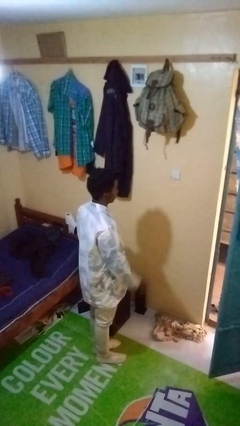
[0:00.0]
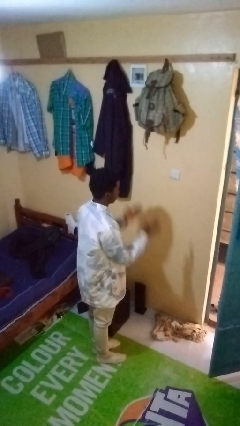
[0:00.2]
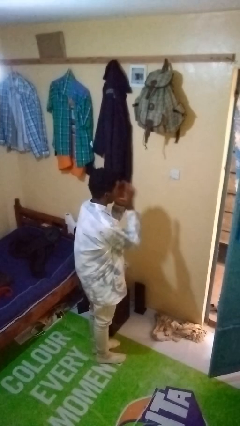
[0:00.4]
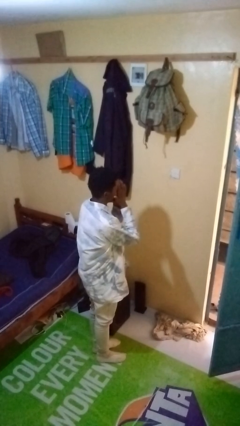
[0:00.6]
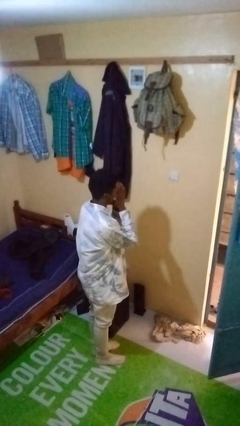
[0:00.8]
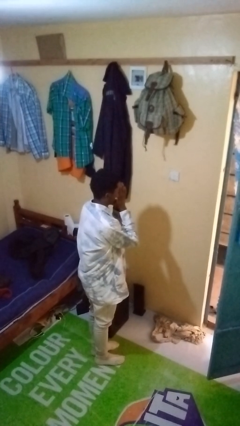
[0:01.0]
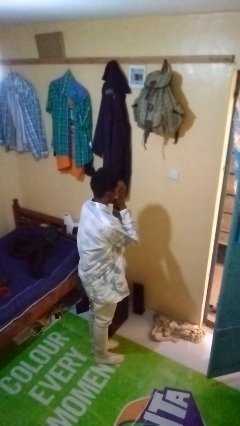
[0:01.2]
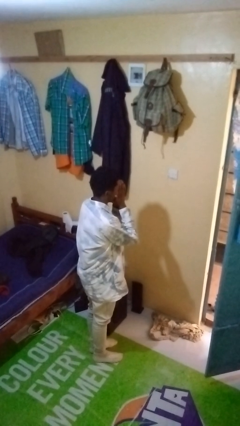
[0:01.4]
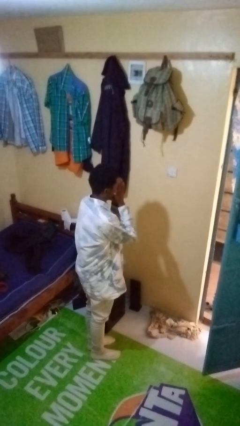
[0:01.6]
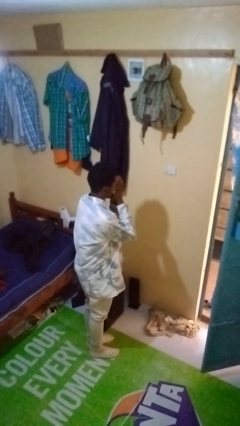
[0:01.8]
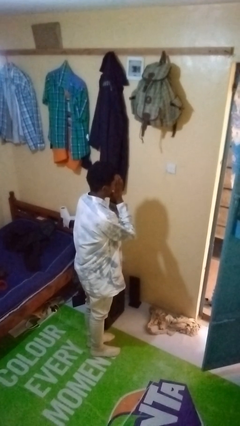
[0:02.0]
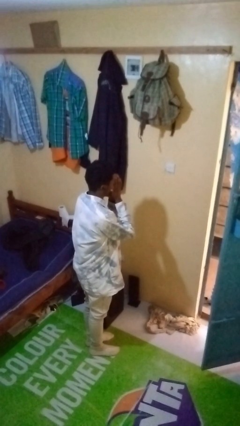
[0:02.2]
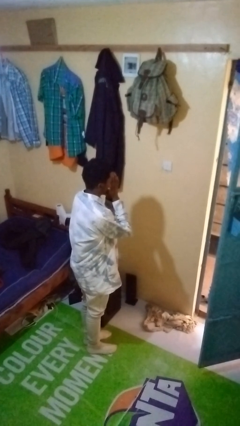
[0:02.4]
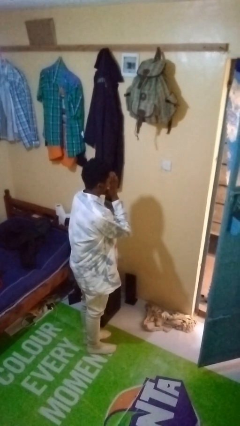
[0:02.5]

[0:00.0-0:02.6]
person covers face with hands

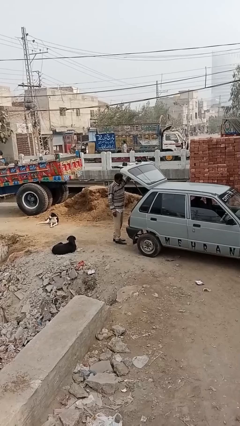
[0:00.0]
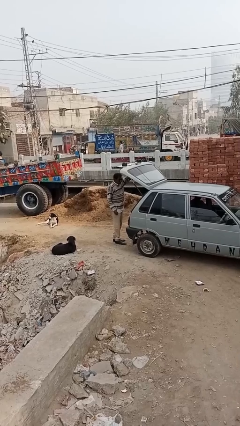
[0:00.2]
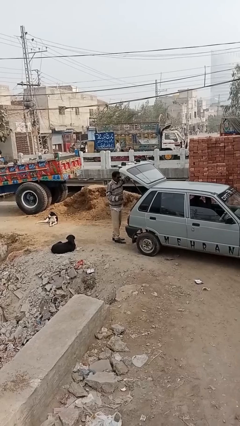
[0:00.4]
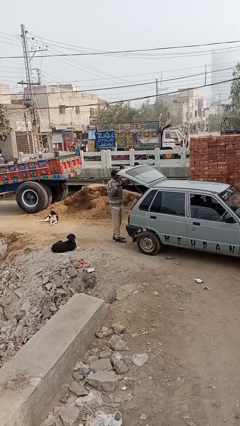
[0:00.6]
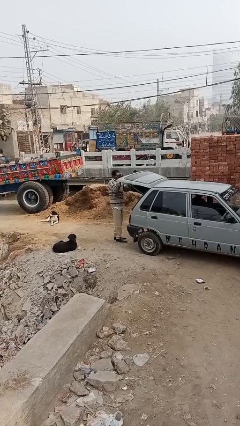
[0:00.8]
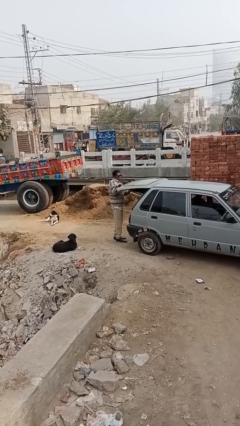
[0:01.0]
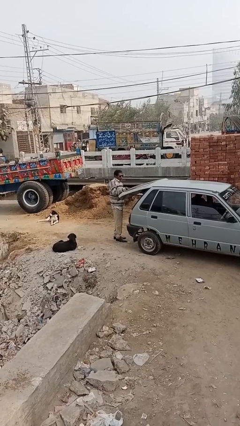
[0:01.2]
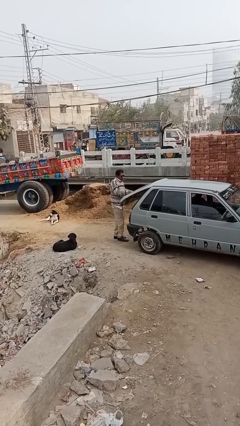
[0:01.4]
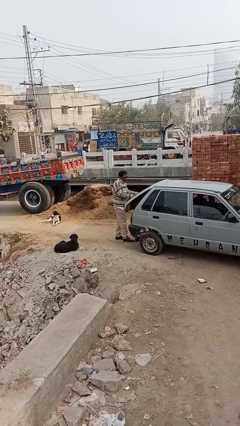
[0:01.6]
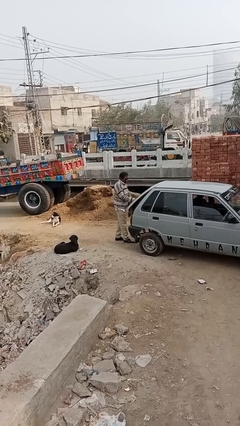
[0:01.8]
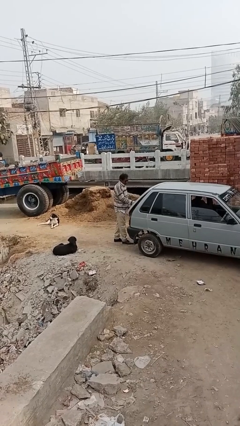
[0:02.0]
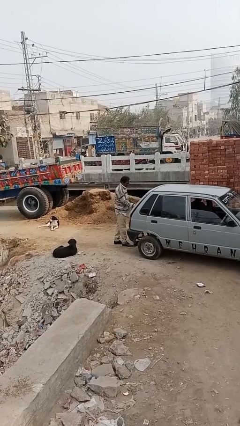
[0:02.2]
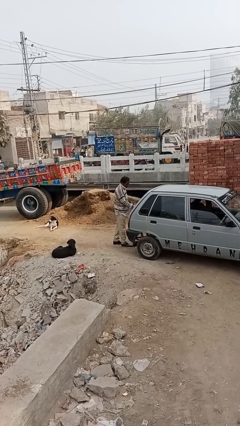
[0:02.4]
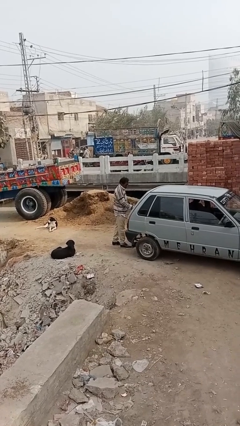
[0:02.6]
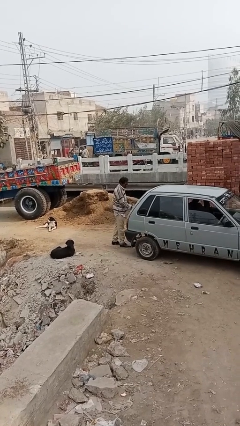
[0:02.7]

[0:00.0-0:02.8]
person closes car trunk

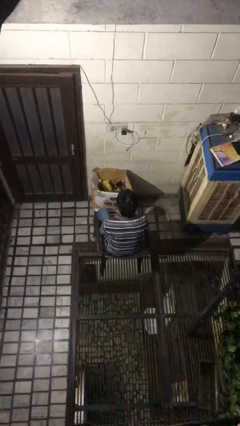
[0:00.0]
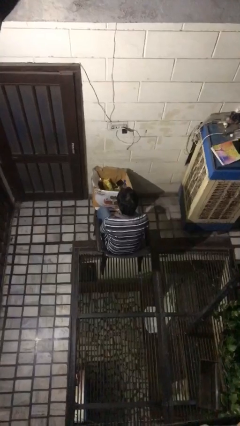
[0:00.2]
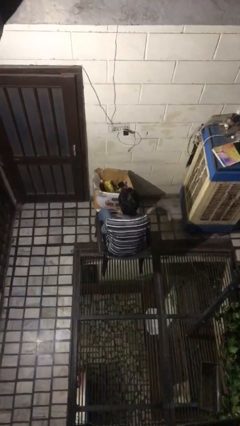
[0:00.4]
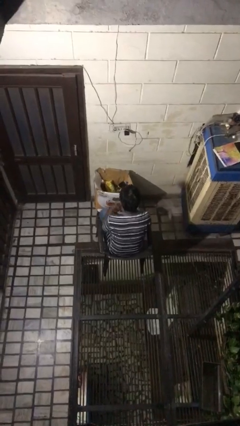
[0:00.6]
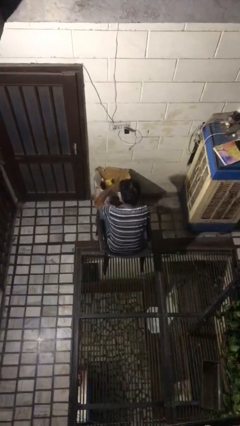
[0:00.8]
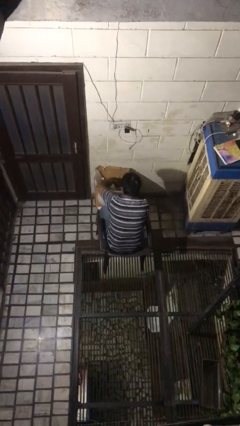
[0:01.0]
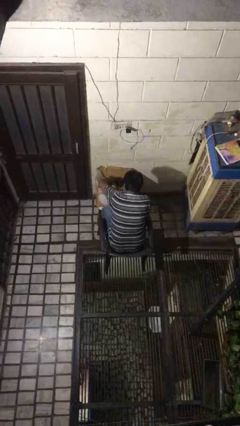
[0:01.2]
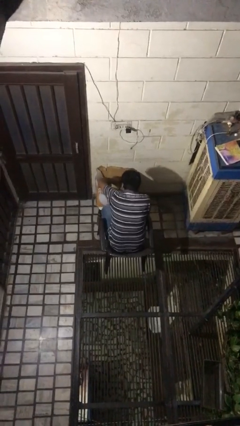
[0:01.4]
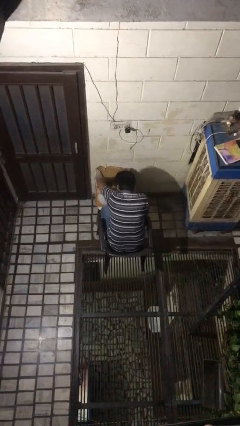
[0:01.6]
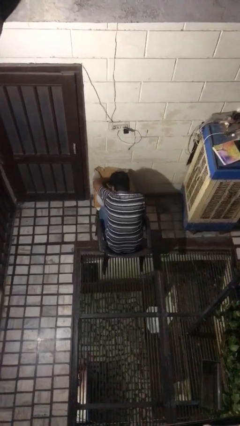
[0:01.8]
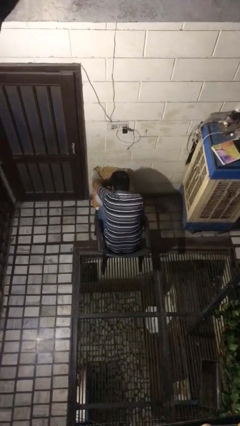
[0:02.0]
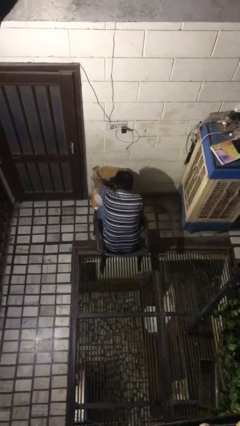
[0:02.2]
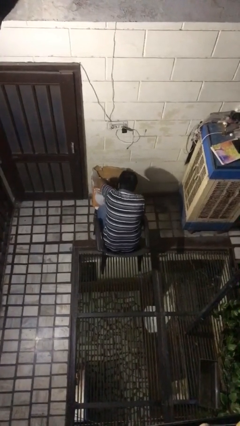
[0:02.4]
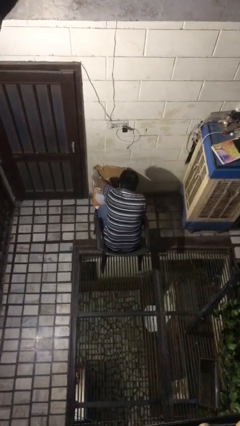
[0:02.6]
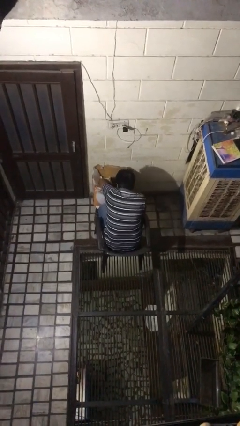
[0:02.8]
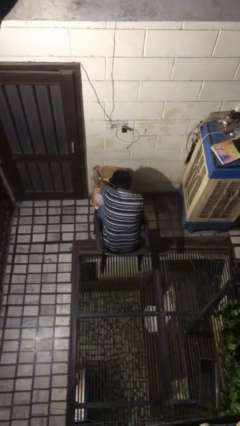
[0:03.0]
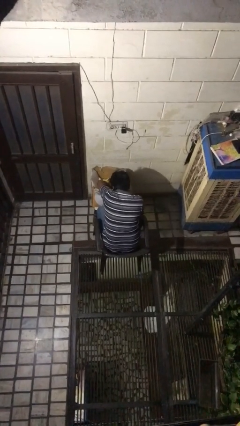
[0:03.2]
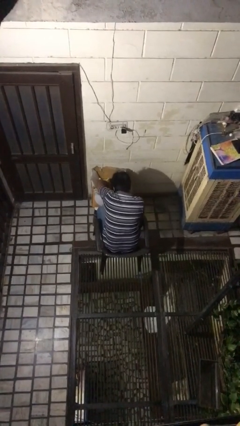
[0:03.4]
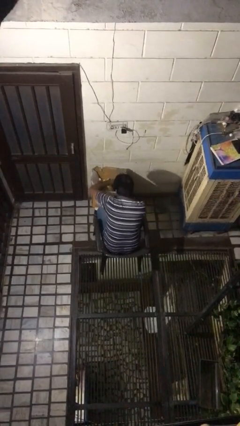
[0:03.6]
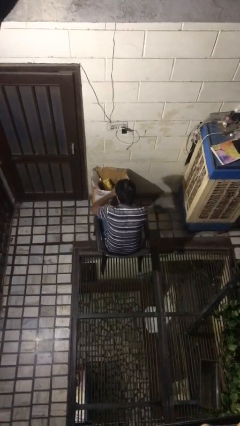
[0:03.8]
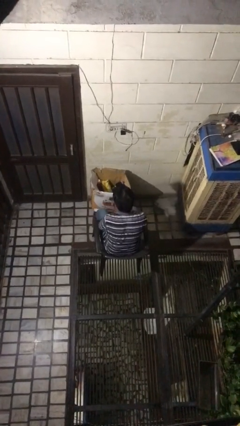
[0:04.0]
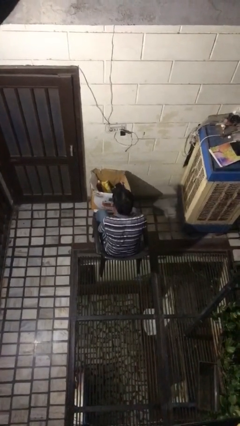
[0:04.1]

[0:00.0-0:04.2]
person searches in box

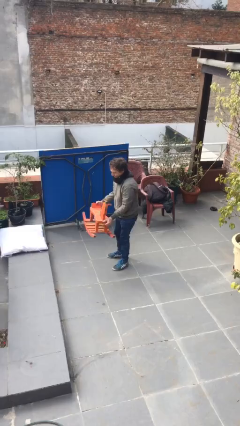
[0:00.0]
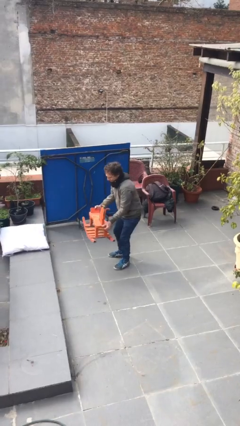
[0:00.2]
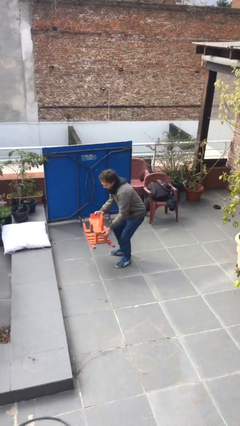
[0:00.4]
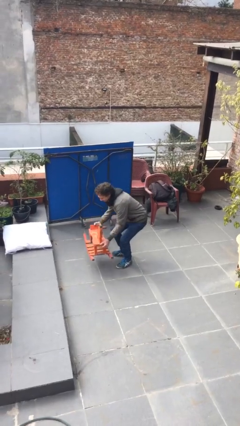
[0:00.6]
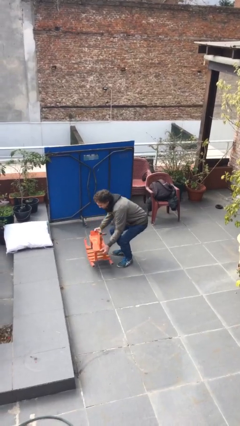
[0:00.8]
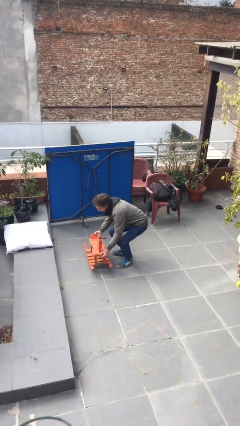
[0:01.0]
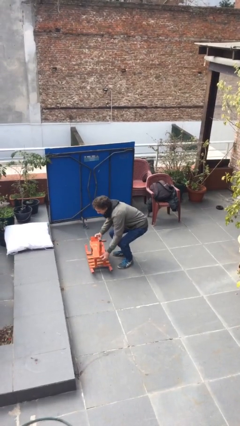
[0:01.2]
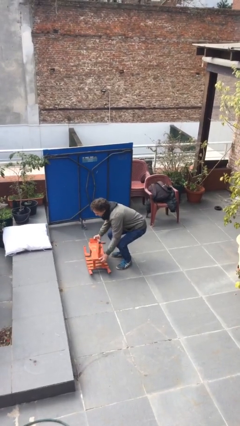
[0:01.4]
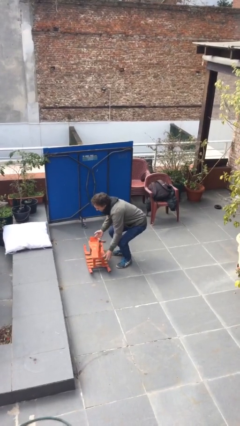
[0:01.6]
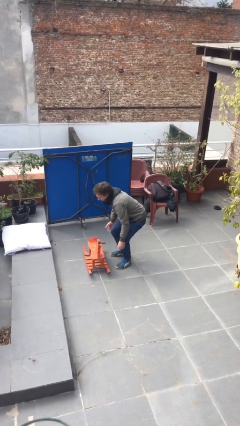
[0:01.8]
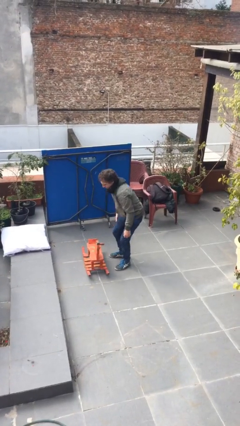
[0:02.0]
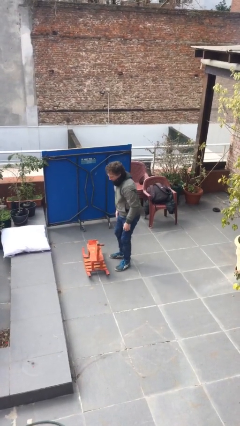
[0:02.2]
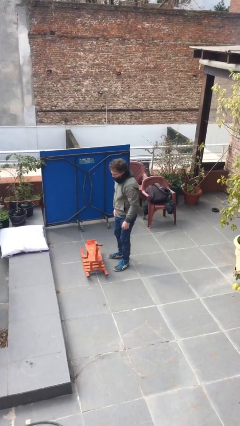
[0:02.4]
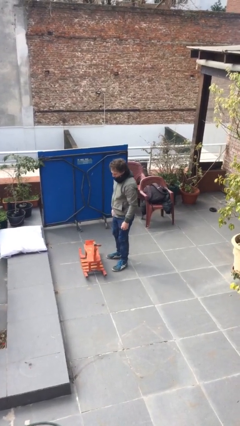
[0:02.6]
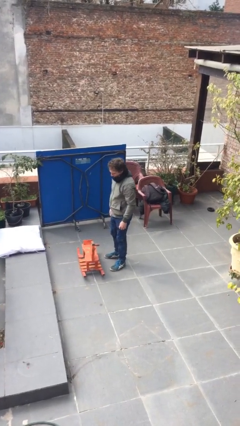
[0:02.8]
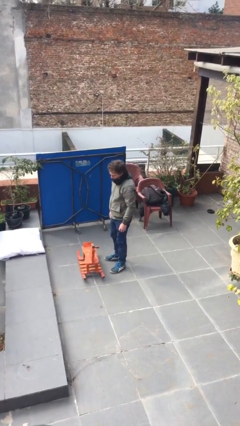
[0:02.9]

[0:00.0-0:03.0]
person puts down object on floor

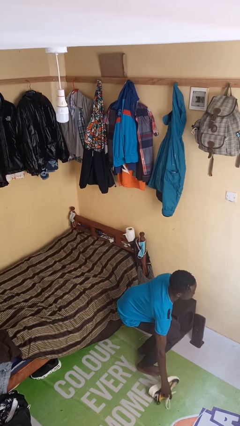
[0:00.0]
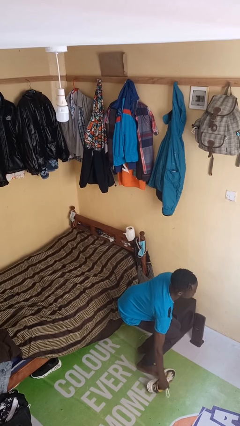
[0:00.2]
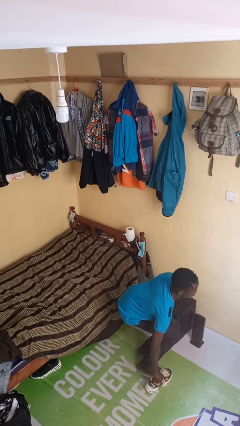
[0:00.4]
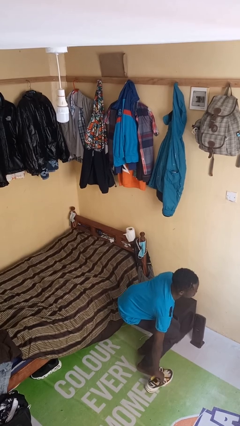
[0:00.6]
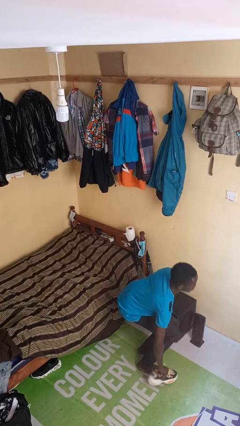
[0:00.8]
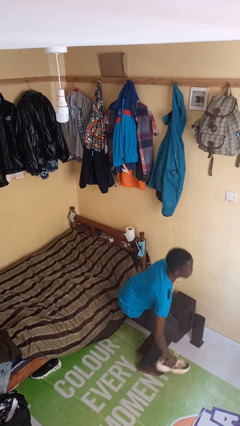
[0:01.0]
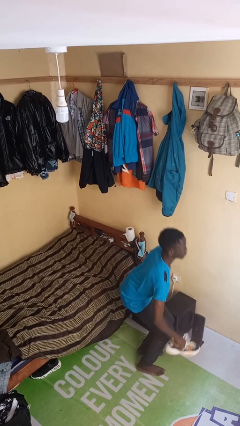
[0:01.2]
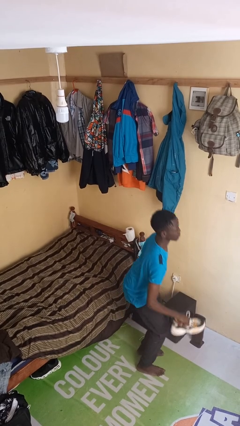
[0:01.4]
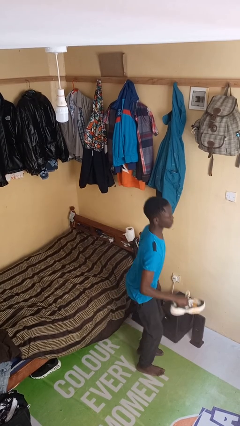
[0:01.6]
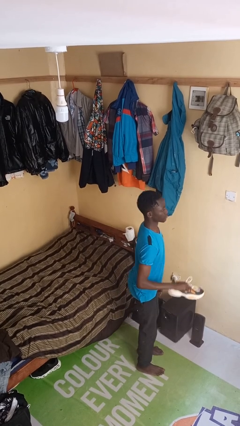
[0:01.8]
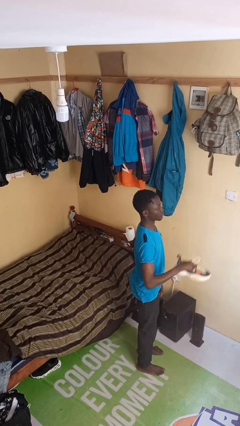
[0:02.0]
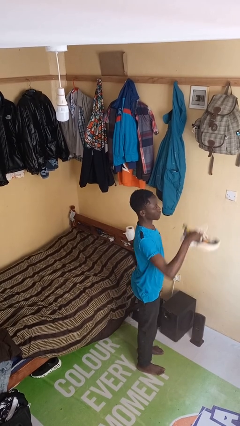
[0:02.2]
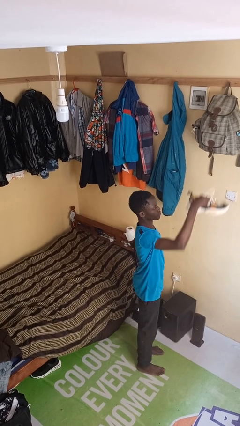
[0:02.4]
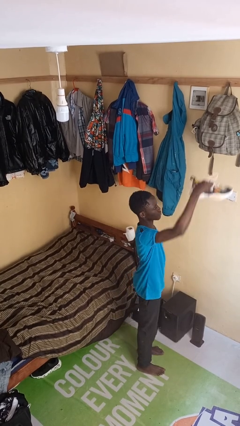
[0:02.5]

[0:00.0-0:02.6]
person picks up object from floor

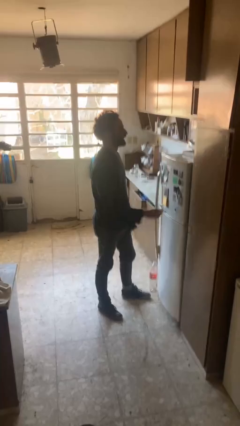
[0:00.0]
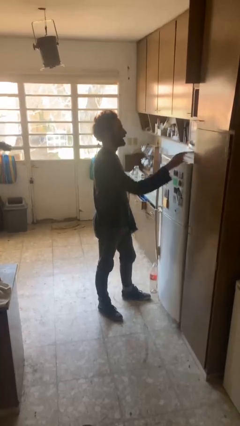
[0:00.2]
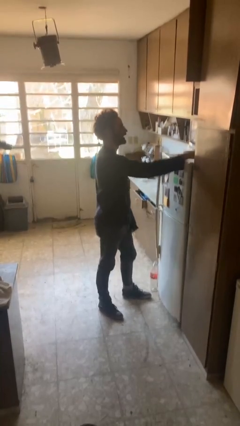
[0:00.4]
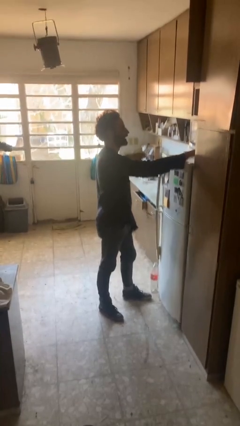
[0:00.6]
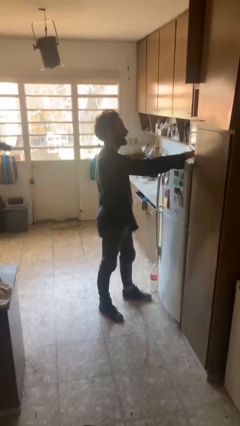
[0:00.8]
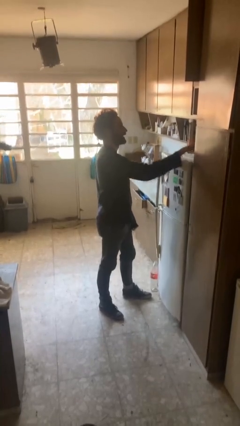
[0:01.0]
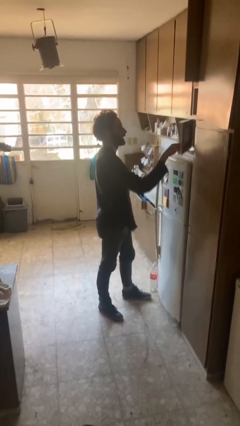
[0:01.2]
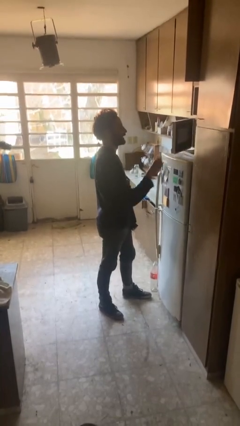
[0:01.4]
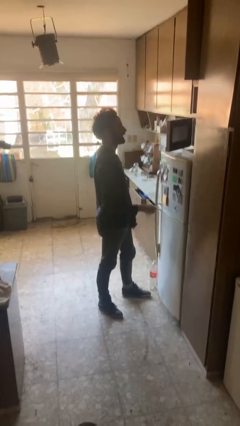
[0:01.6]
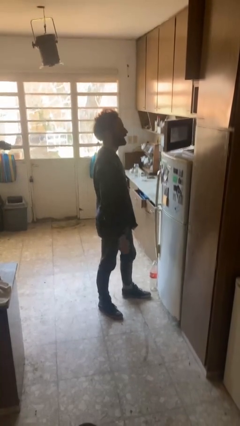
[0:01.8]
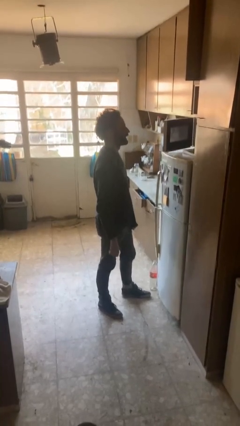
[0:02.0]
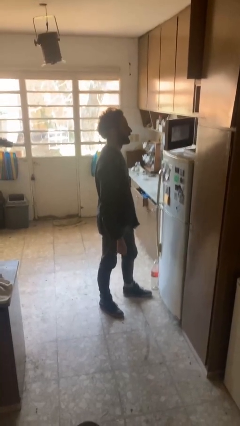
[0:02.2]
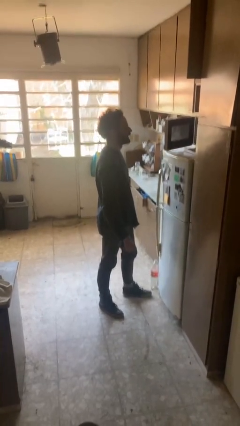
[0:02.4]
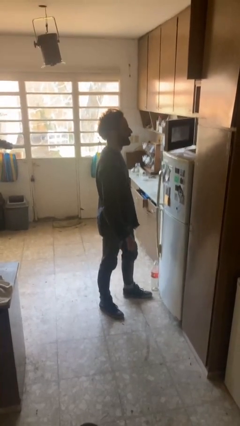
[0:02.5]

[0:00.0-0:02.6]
person opens microwave
